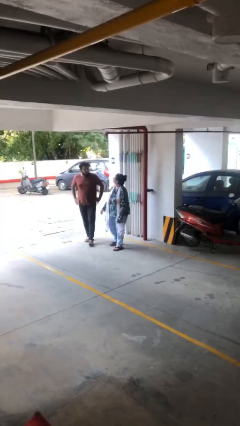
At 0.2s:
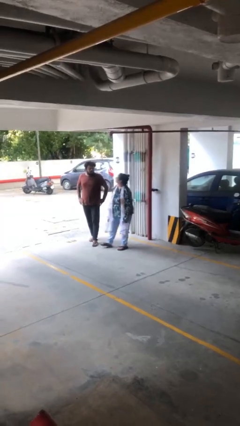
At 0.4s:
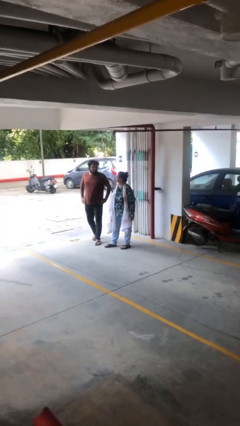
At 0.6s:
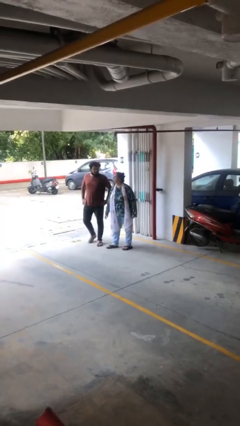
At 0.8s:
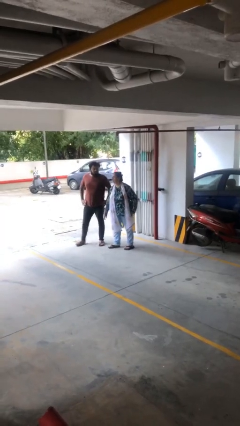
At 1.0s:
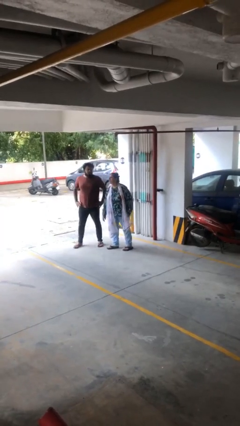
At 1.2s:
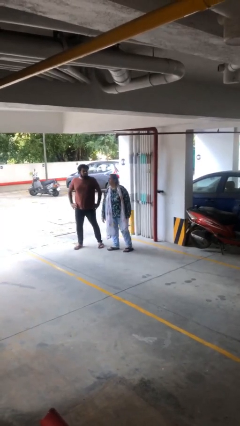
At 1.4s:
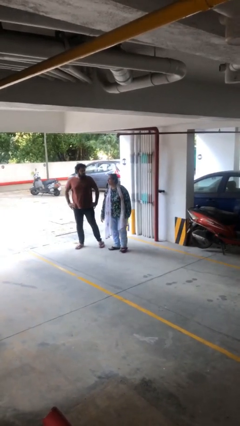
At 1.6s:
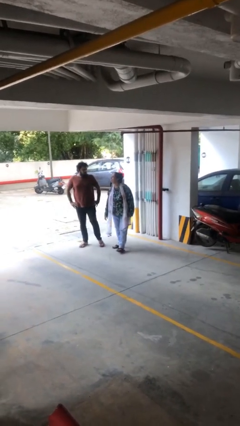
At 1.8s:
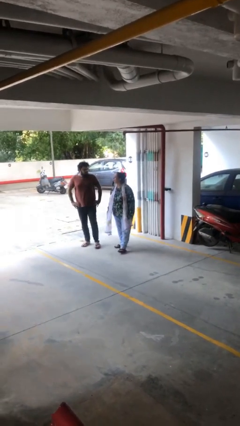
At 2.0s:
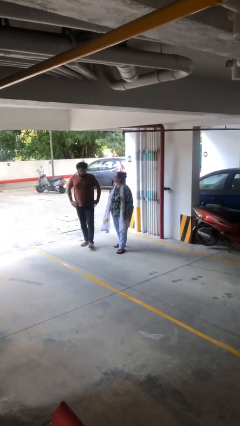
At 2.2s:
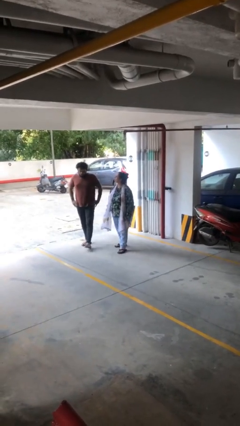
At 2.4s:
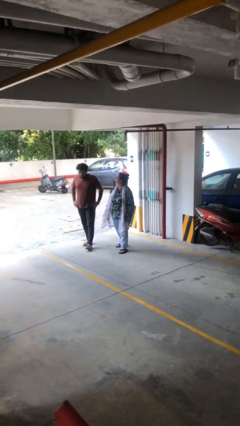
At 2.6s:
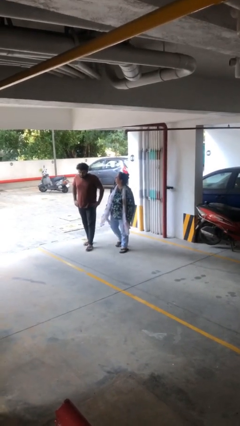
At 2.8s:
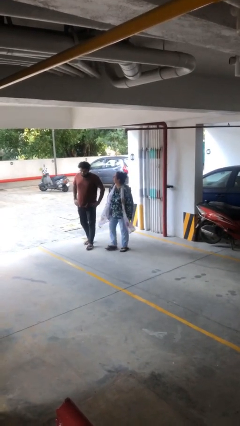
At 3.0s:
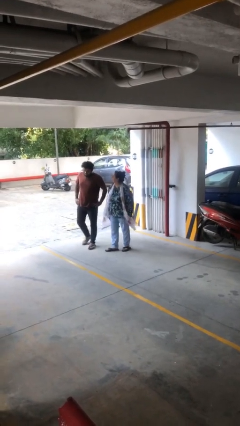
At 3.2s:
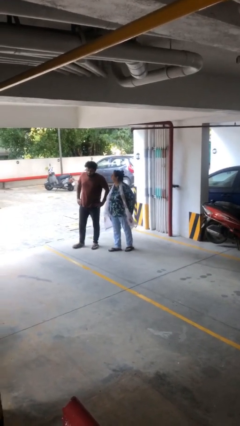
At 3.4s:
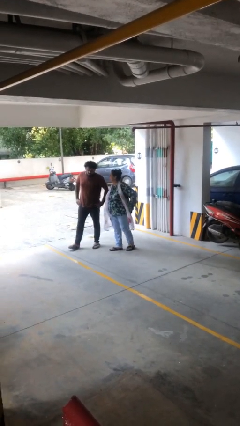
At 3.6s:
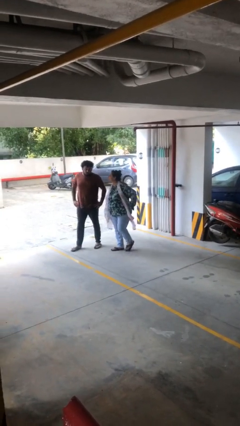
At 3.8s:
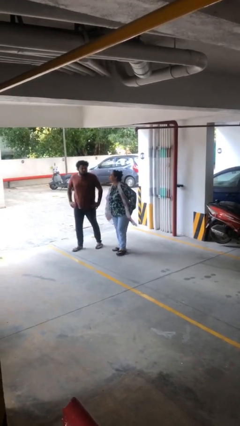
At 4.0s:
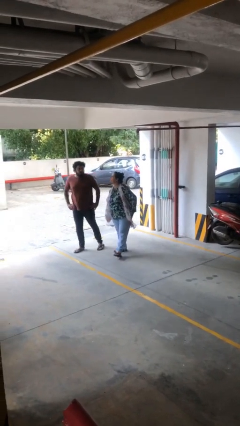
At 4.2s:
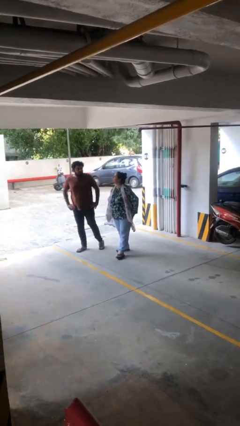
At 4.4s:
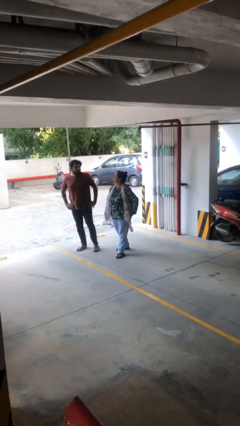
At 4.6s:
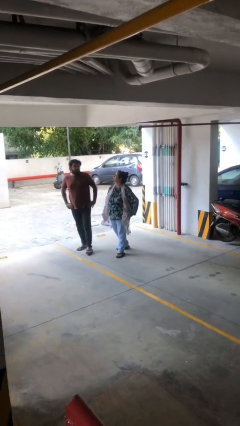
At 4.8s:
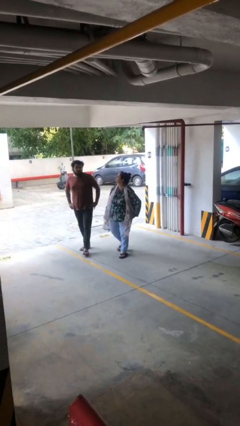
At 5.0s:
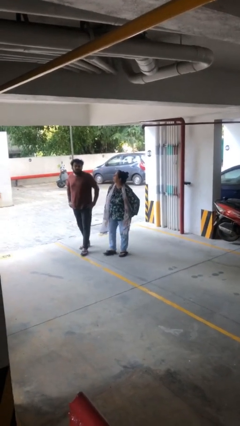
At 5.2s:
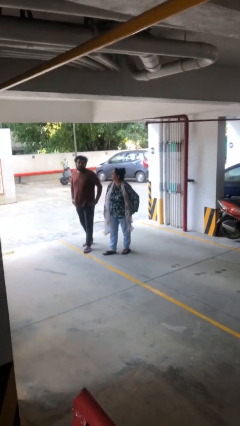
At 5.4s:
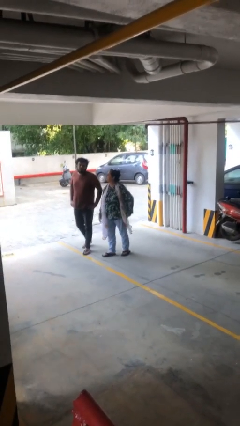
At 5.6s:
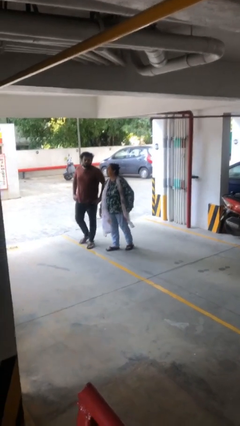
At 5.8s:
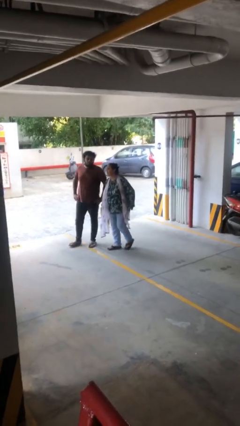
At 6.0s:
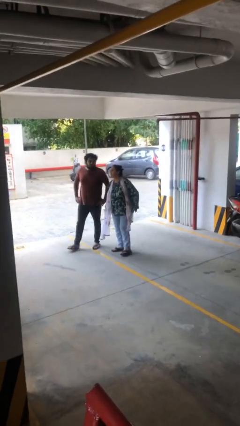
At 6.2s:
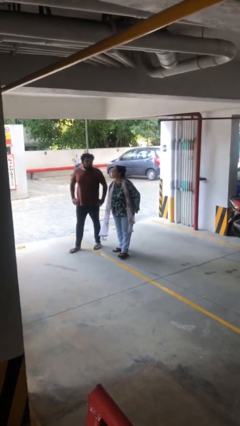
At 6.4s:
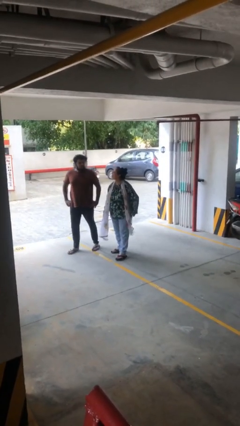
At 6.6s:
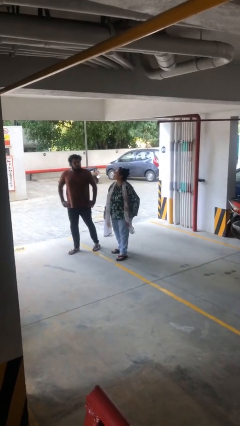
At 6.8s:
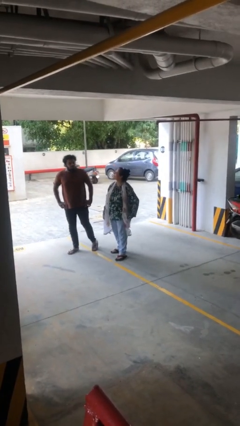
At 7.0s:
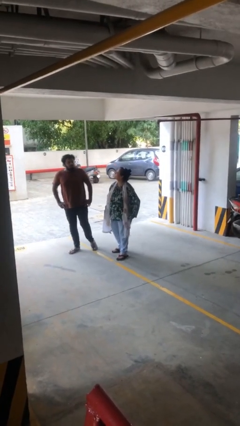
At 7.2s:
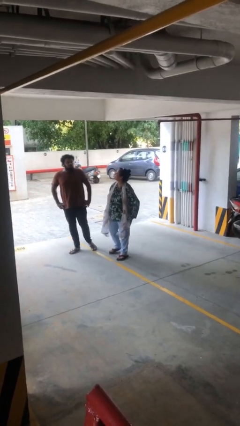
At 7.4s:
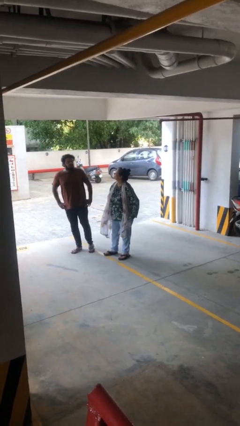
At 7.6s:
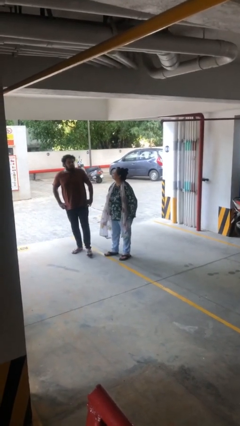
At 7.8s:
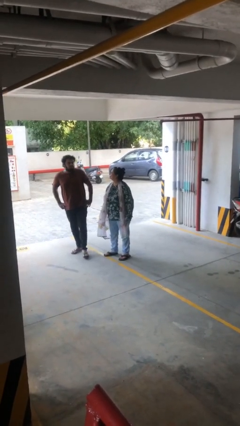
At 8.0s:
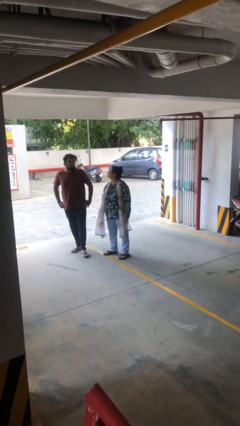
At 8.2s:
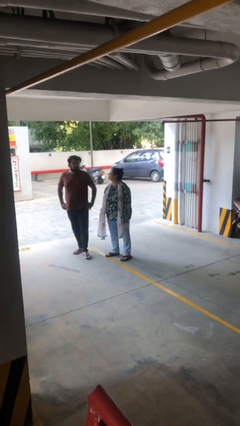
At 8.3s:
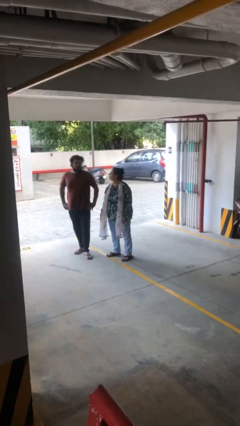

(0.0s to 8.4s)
person talks to person

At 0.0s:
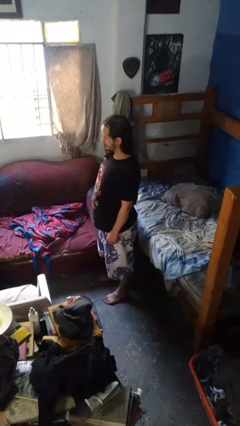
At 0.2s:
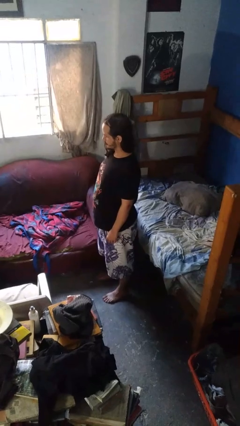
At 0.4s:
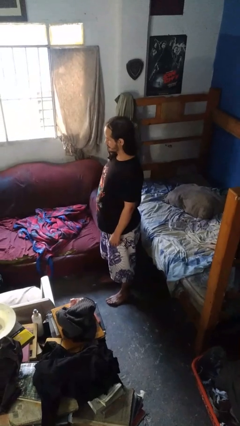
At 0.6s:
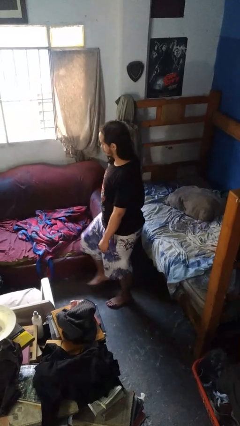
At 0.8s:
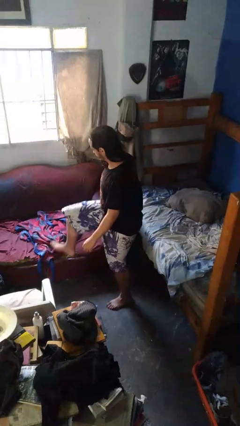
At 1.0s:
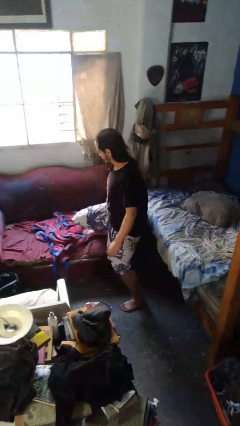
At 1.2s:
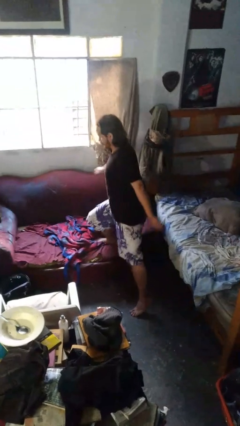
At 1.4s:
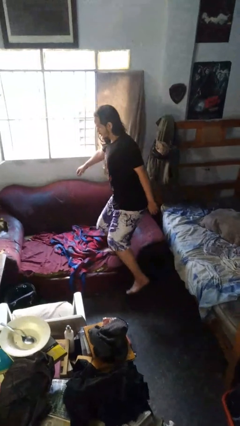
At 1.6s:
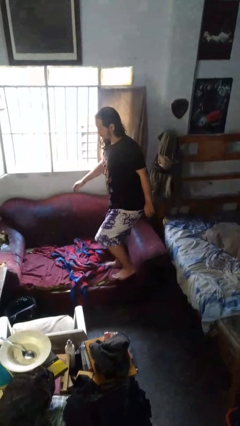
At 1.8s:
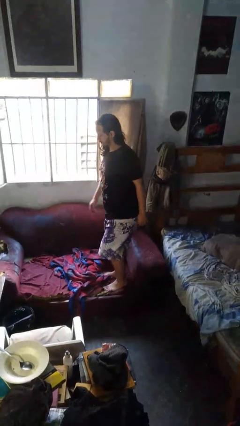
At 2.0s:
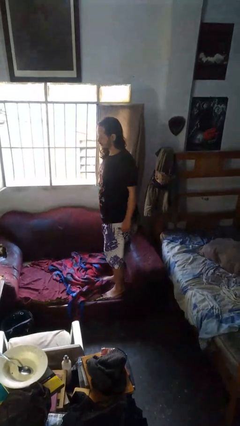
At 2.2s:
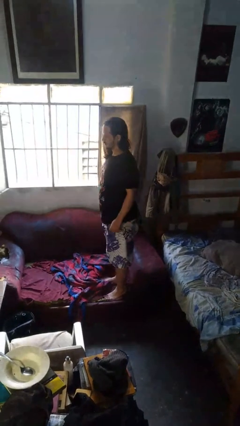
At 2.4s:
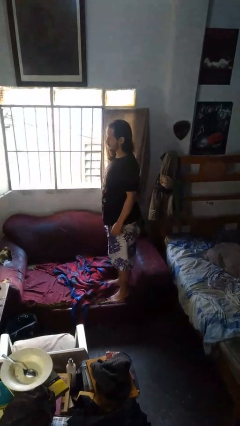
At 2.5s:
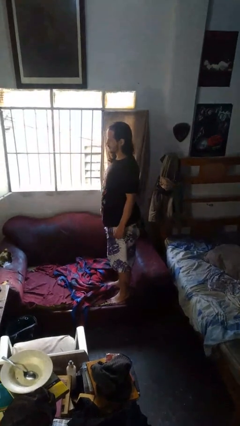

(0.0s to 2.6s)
person climbs on couch

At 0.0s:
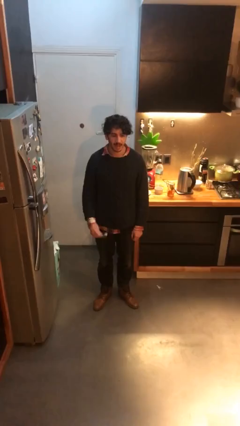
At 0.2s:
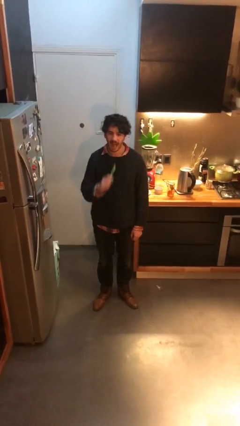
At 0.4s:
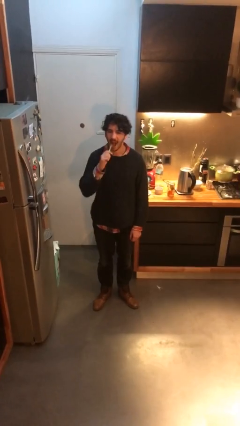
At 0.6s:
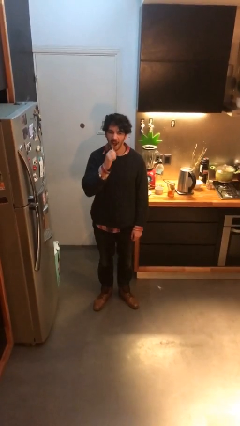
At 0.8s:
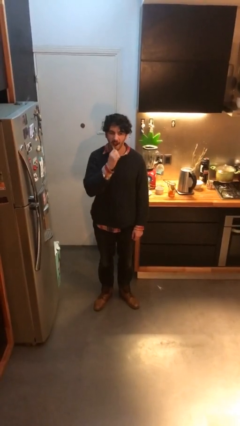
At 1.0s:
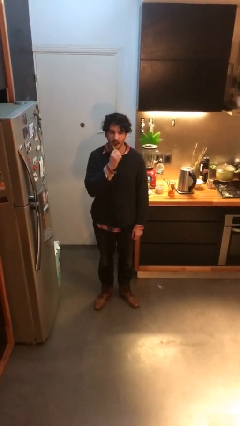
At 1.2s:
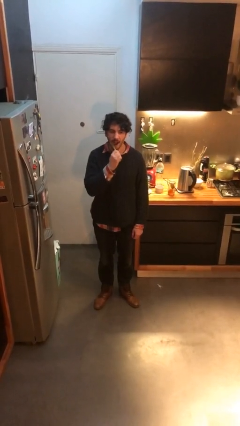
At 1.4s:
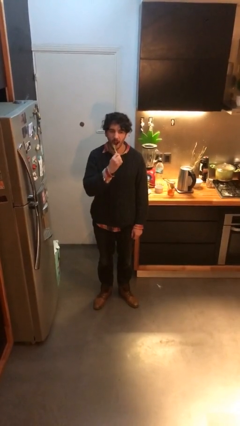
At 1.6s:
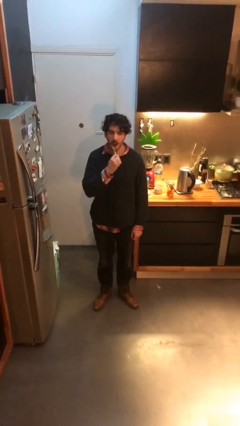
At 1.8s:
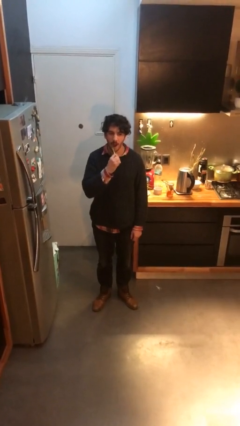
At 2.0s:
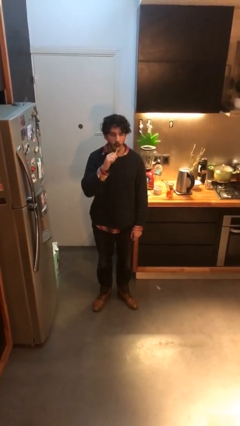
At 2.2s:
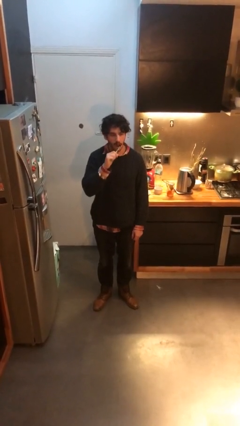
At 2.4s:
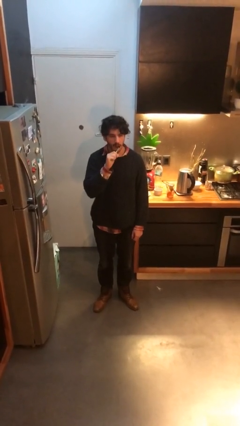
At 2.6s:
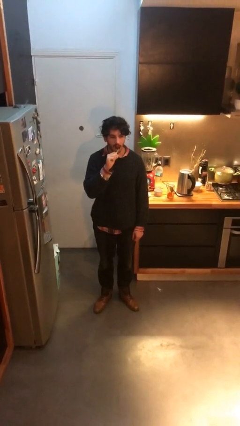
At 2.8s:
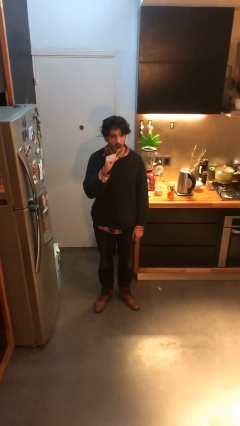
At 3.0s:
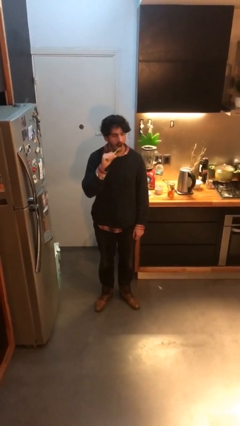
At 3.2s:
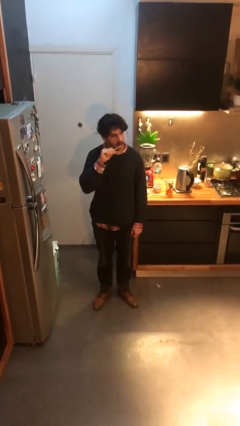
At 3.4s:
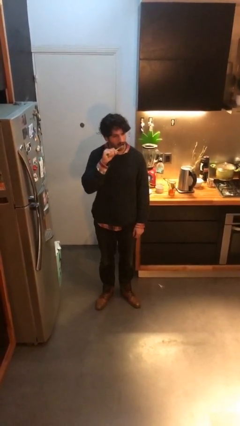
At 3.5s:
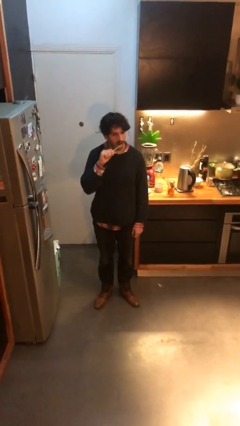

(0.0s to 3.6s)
person brushes teeth

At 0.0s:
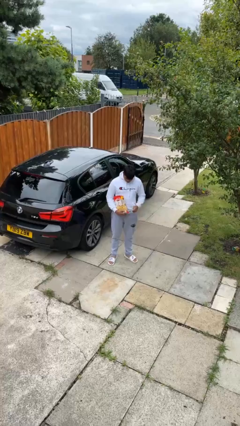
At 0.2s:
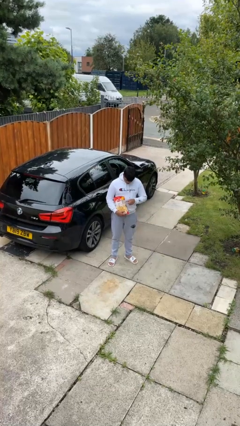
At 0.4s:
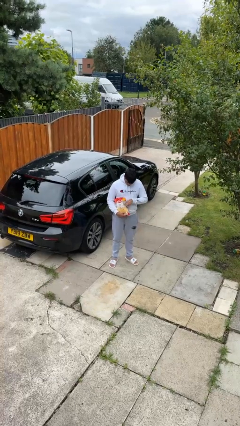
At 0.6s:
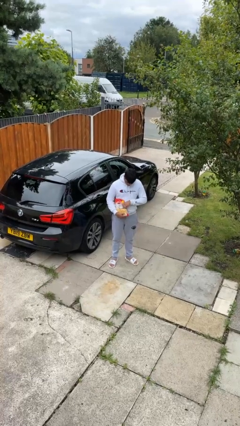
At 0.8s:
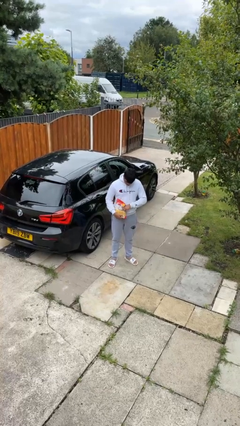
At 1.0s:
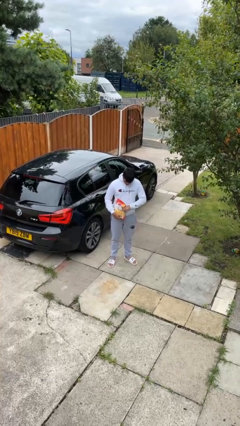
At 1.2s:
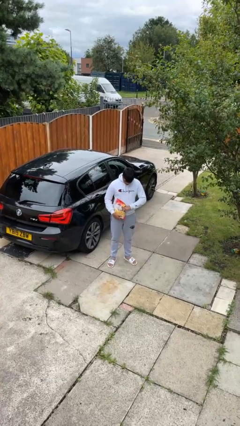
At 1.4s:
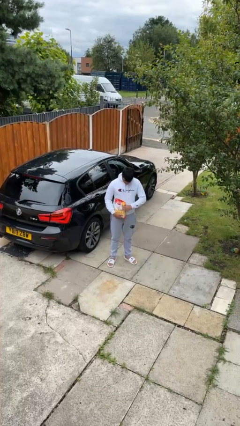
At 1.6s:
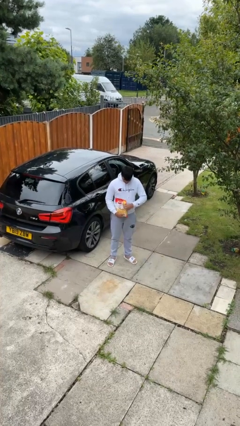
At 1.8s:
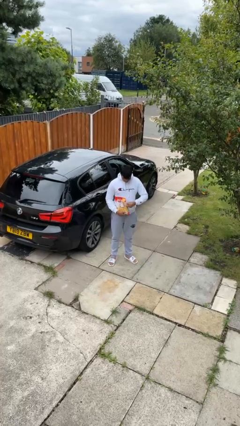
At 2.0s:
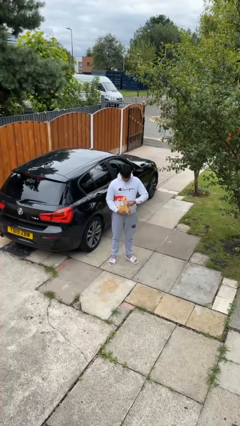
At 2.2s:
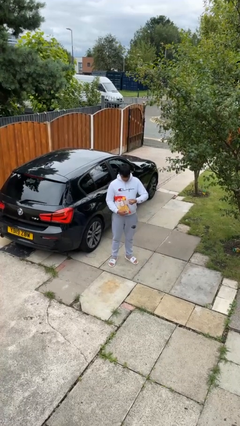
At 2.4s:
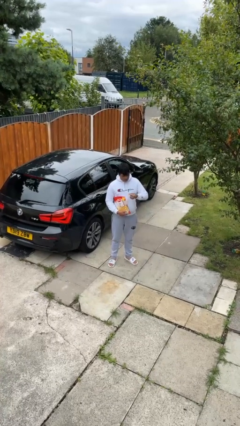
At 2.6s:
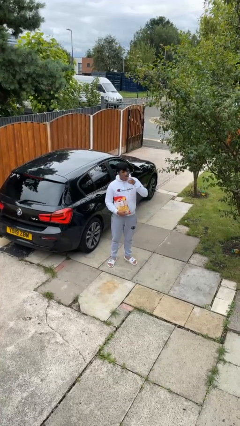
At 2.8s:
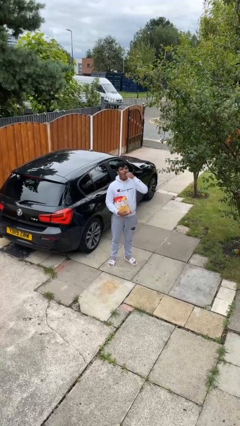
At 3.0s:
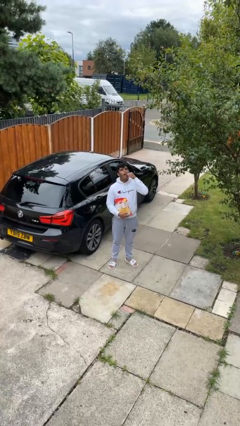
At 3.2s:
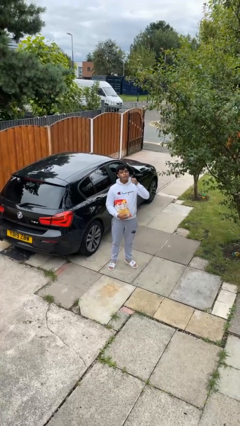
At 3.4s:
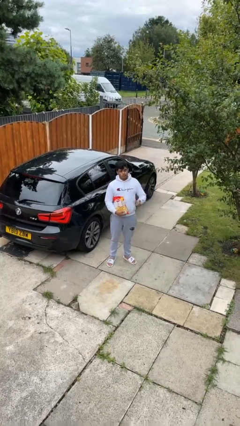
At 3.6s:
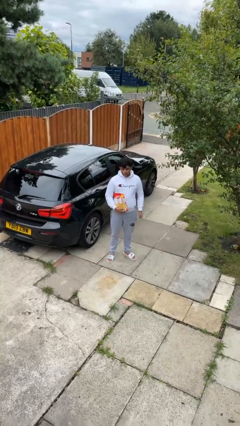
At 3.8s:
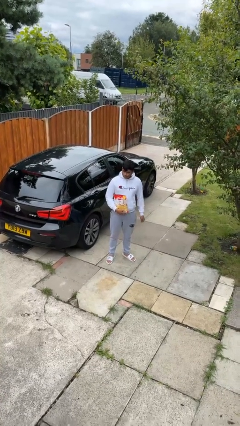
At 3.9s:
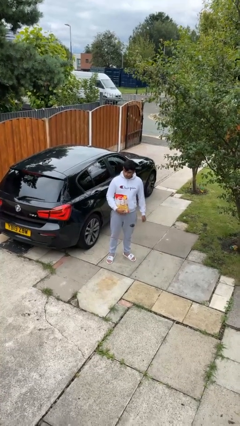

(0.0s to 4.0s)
person eats snack from bag
